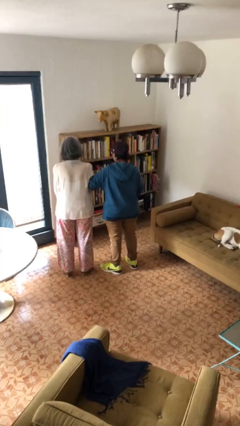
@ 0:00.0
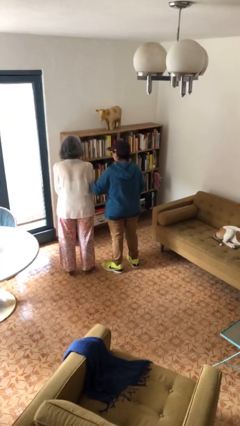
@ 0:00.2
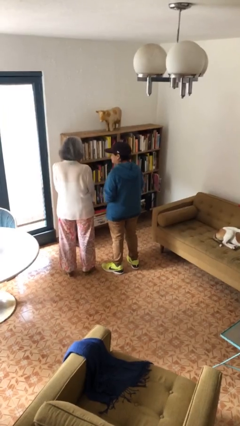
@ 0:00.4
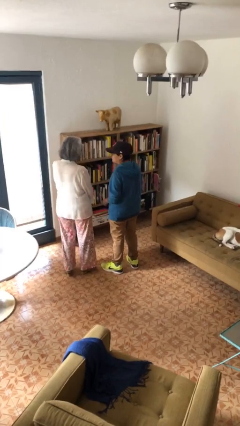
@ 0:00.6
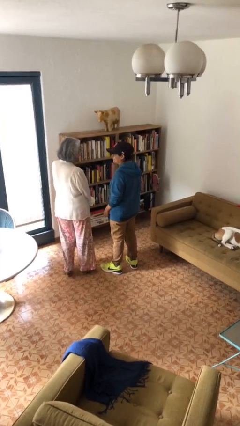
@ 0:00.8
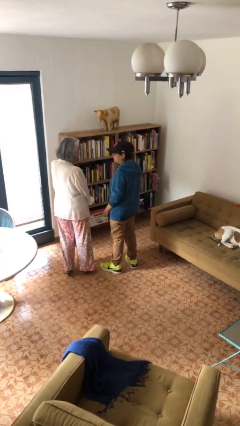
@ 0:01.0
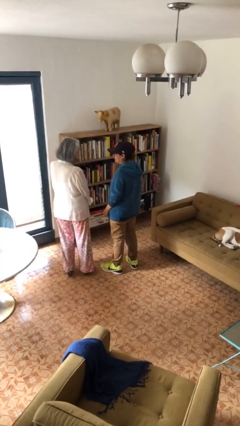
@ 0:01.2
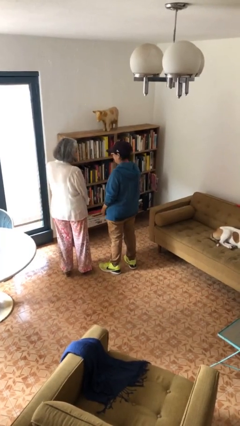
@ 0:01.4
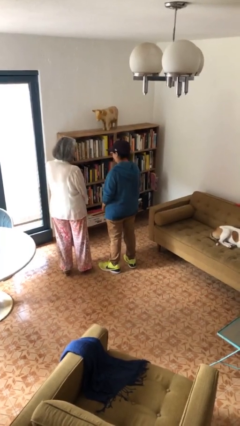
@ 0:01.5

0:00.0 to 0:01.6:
person nudges person with elbow

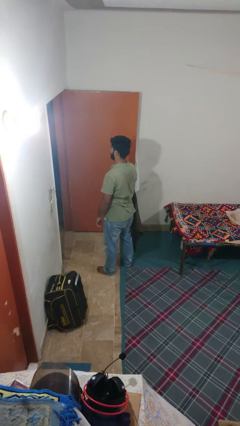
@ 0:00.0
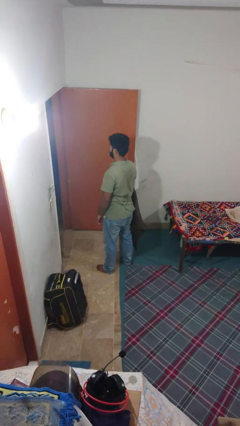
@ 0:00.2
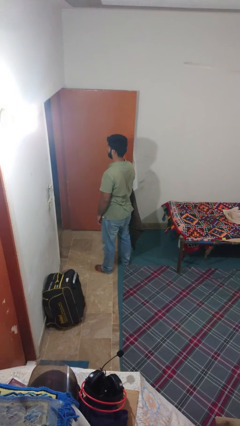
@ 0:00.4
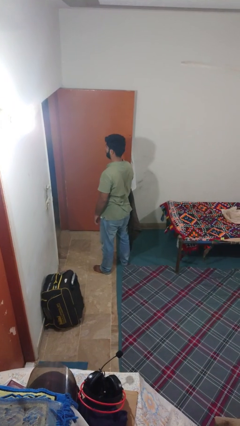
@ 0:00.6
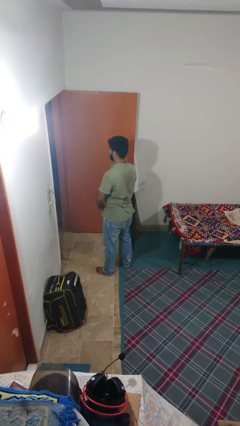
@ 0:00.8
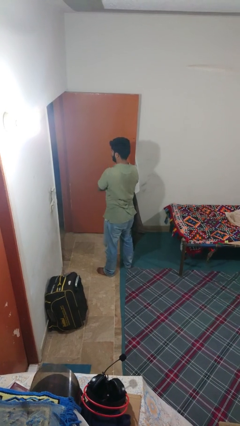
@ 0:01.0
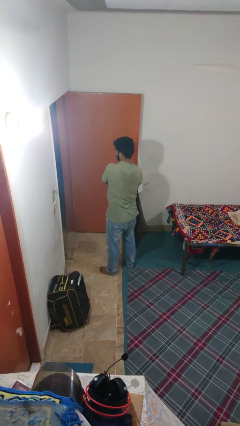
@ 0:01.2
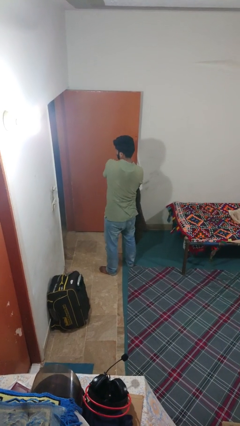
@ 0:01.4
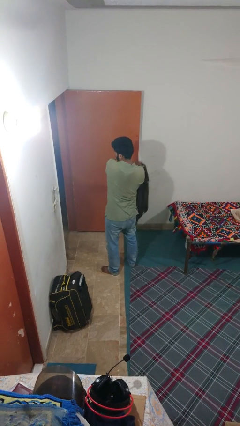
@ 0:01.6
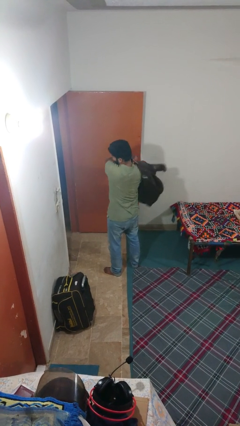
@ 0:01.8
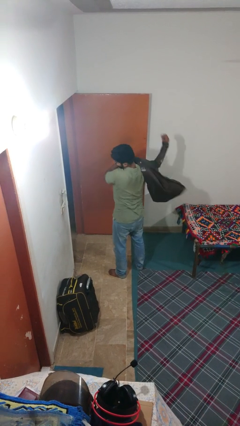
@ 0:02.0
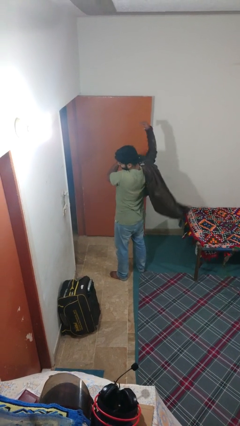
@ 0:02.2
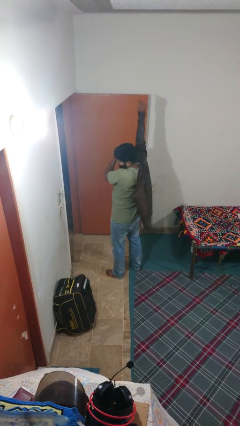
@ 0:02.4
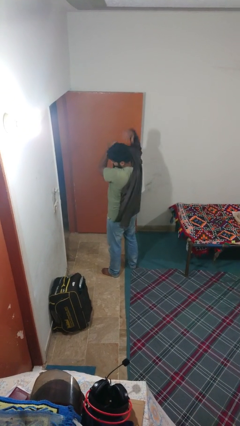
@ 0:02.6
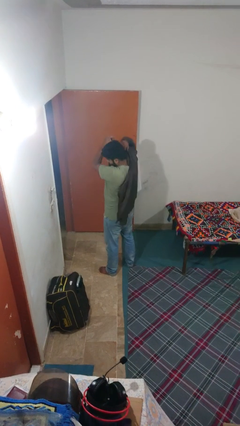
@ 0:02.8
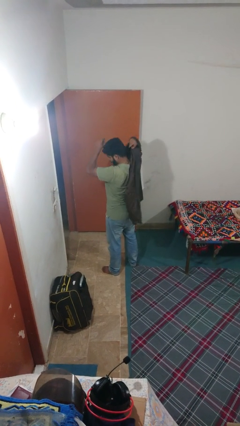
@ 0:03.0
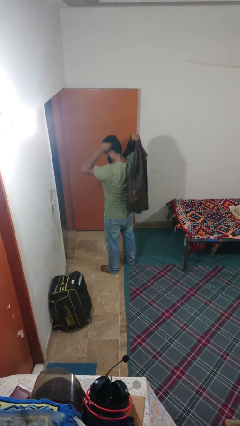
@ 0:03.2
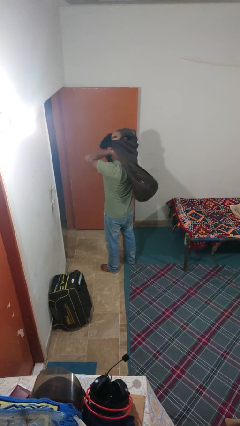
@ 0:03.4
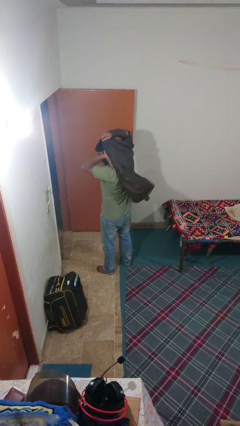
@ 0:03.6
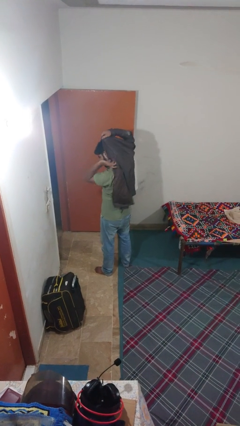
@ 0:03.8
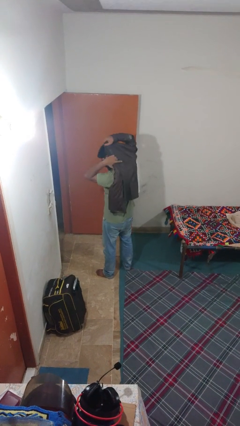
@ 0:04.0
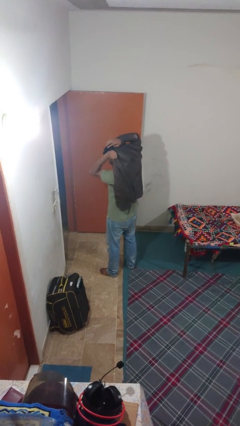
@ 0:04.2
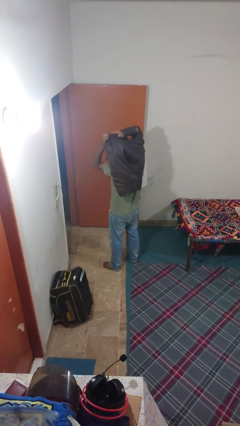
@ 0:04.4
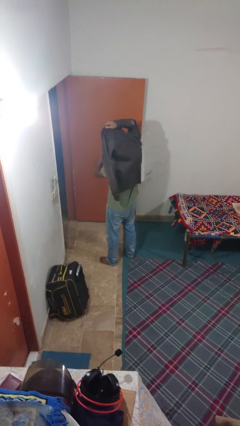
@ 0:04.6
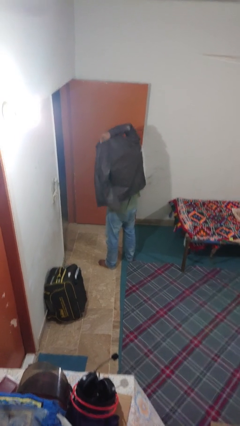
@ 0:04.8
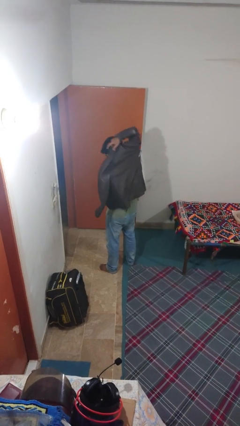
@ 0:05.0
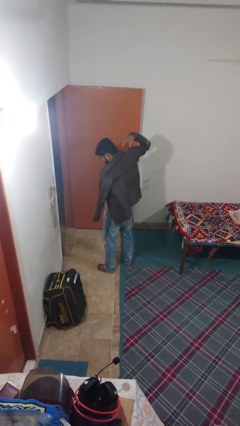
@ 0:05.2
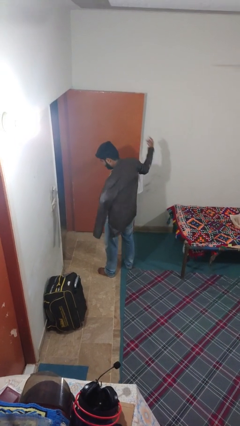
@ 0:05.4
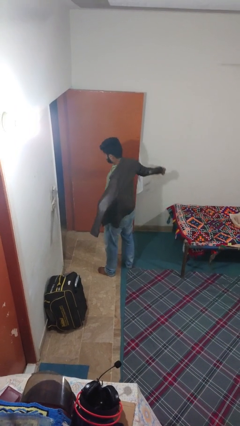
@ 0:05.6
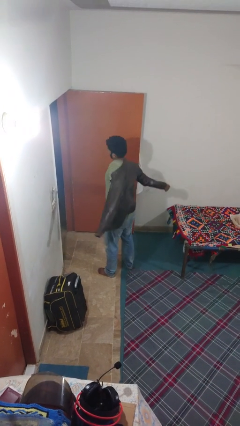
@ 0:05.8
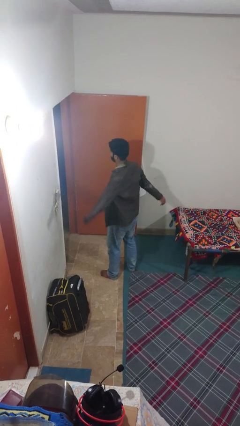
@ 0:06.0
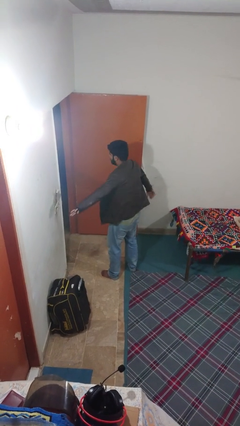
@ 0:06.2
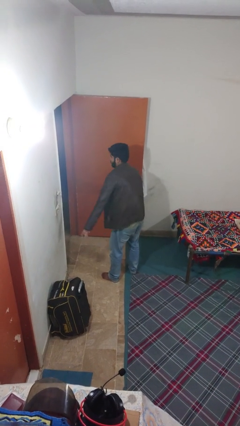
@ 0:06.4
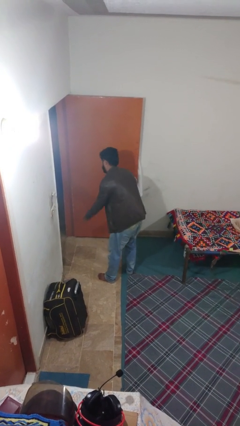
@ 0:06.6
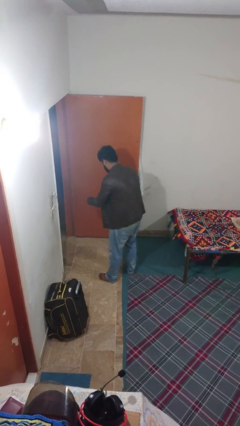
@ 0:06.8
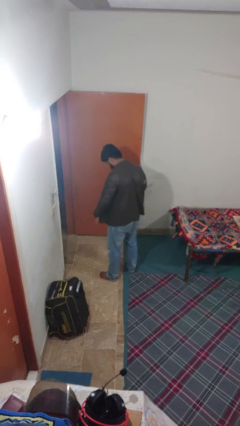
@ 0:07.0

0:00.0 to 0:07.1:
person puts on jacket

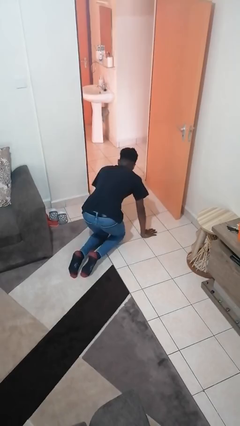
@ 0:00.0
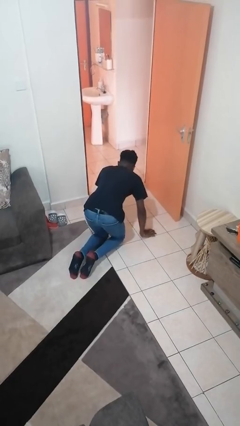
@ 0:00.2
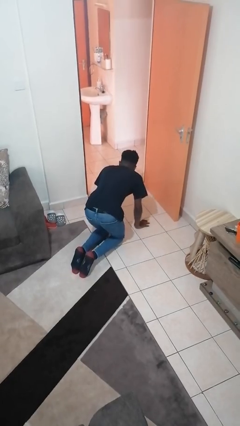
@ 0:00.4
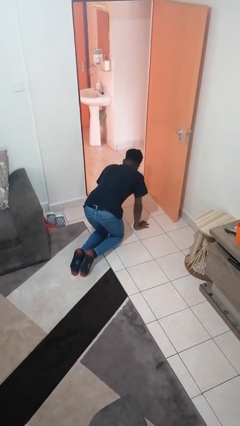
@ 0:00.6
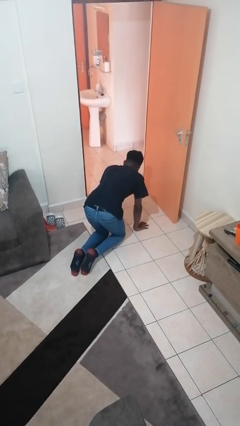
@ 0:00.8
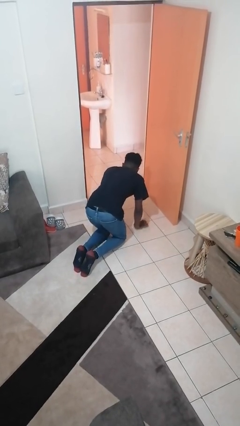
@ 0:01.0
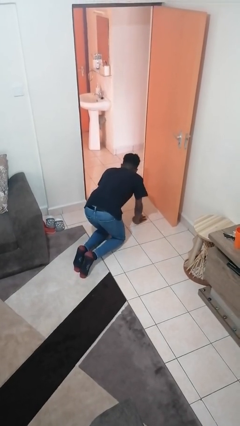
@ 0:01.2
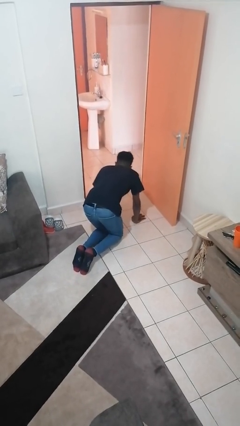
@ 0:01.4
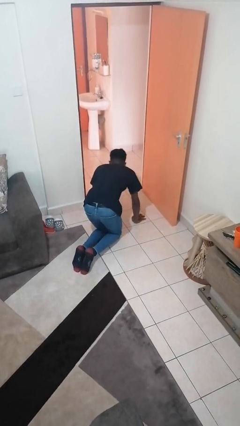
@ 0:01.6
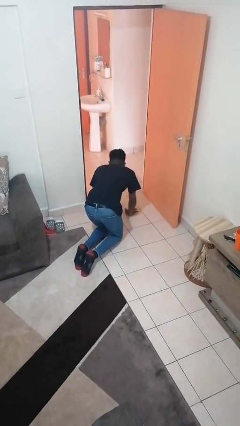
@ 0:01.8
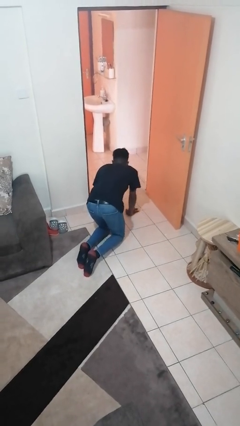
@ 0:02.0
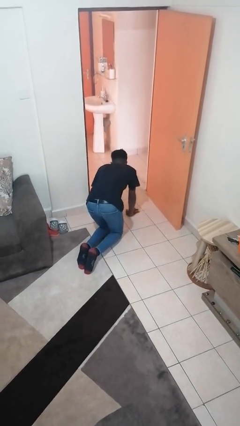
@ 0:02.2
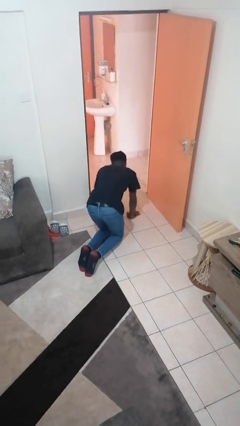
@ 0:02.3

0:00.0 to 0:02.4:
person crawls

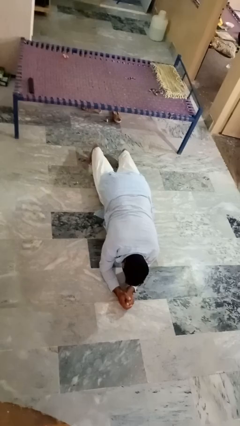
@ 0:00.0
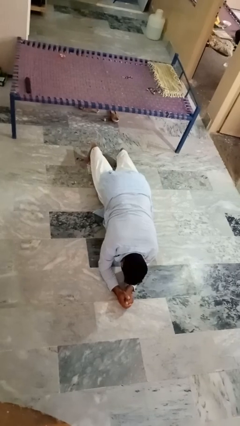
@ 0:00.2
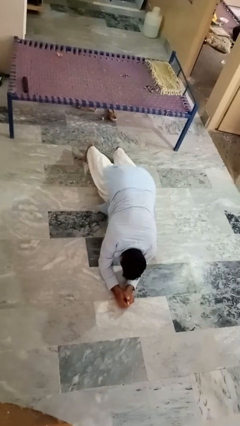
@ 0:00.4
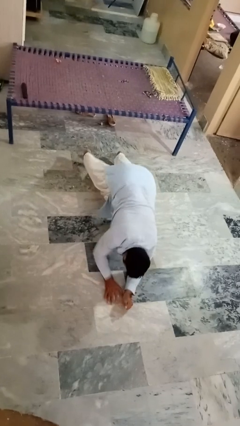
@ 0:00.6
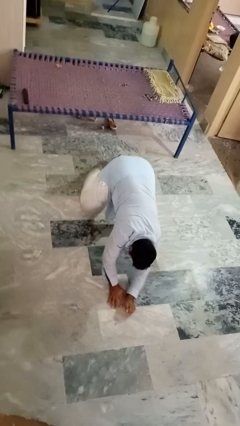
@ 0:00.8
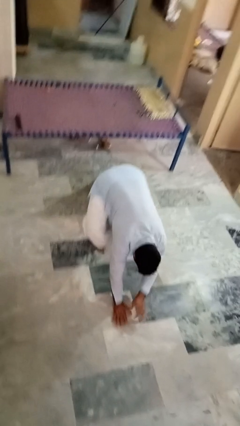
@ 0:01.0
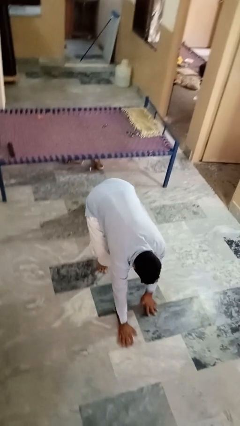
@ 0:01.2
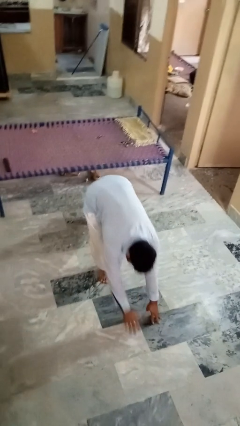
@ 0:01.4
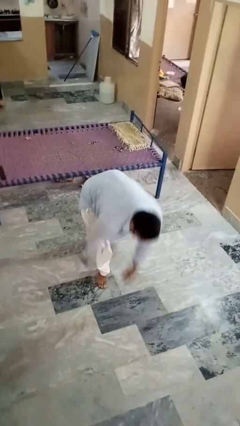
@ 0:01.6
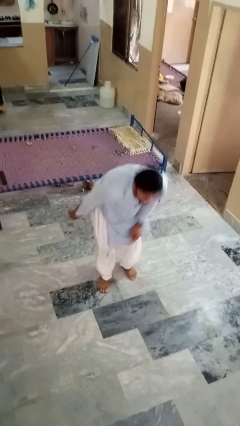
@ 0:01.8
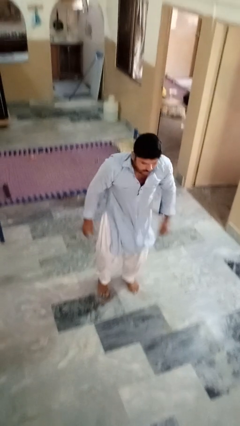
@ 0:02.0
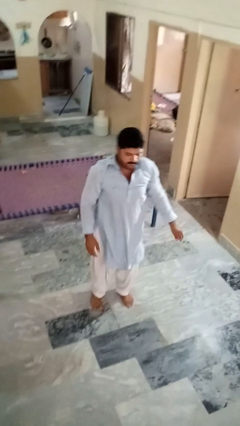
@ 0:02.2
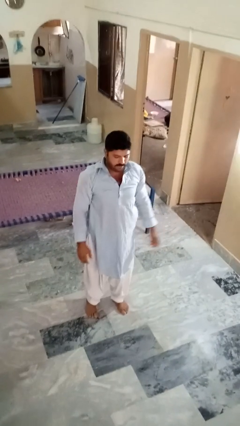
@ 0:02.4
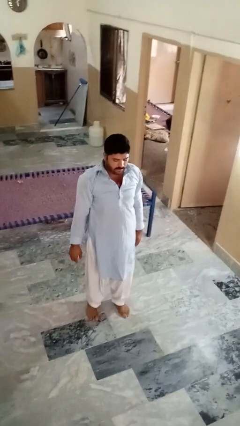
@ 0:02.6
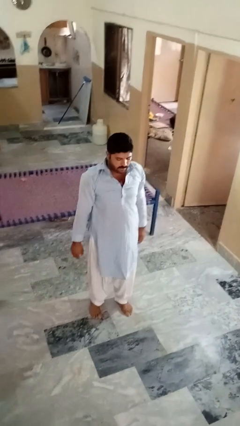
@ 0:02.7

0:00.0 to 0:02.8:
person stands up from floor

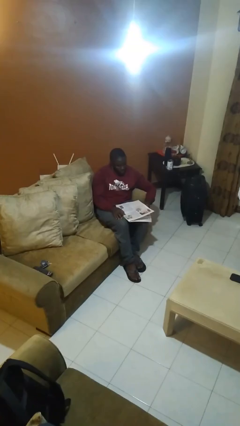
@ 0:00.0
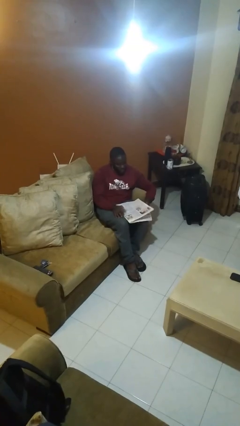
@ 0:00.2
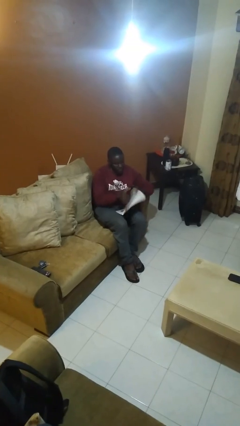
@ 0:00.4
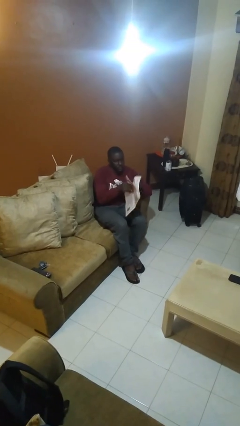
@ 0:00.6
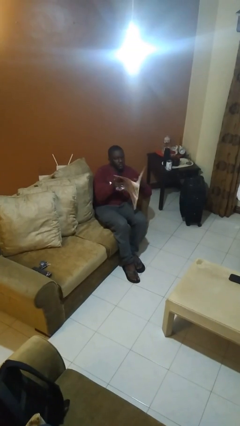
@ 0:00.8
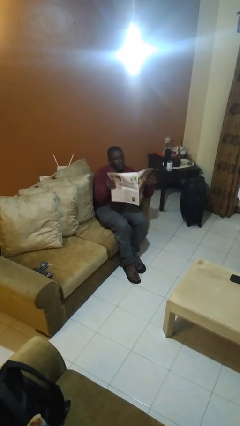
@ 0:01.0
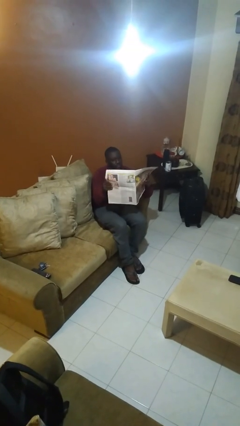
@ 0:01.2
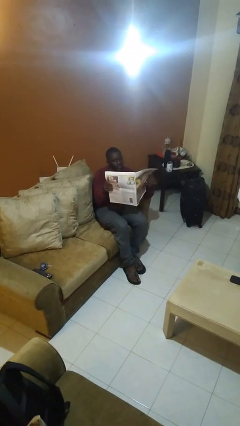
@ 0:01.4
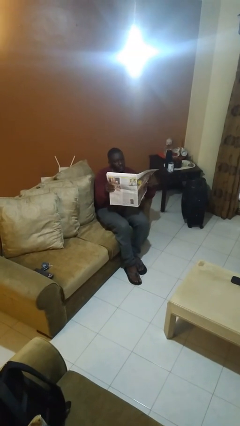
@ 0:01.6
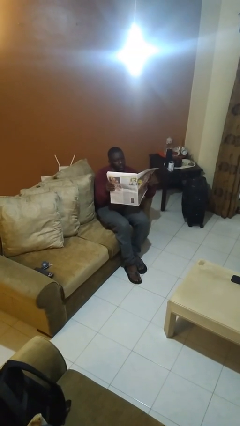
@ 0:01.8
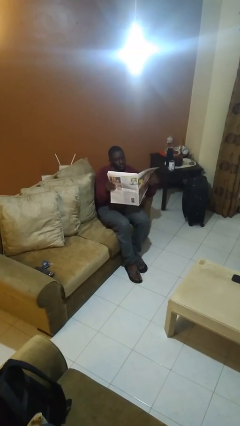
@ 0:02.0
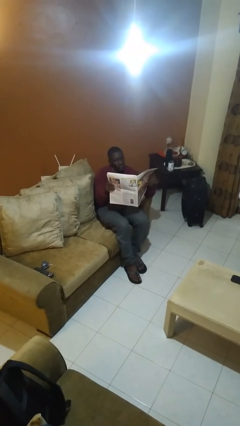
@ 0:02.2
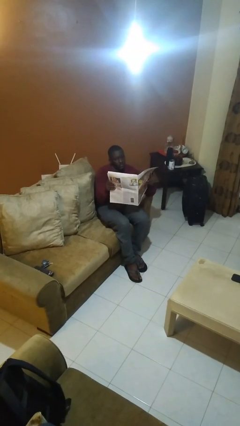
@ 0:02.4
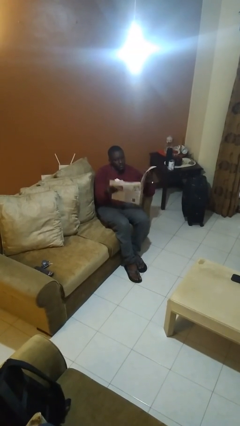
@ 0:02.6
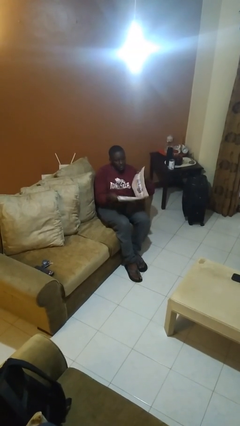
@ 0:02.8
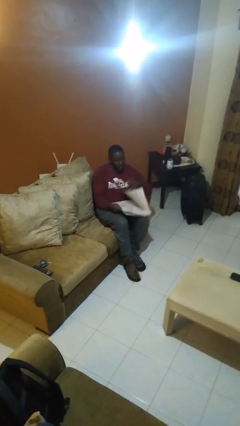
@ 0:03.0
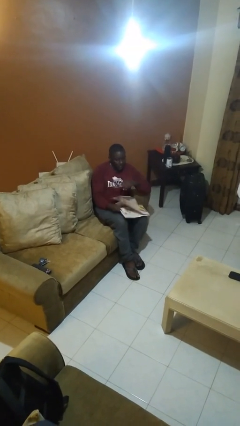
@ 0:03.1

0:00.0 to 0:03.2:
person reads newspaper

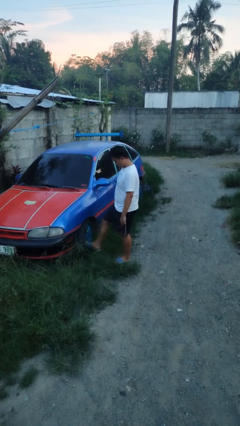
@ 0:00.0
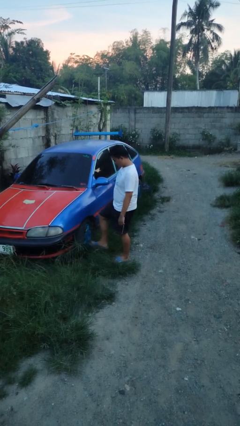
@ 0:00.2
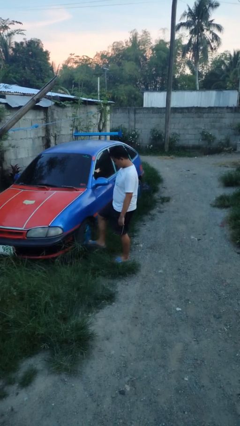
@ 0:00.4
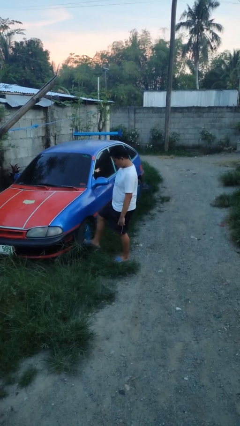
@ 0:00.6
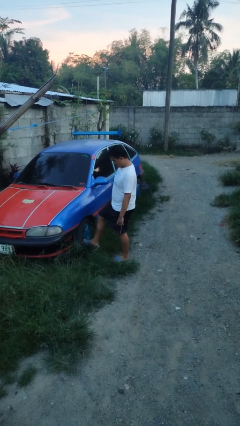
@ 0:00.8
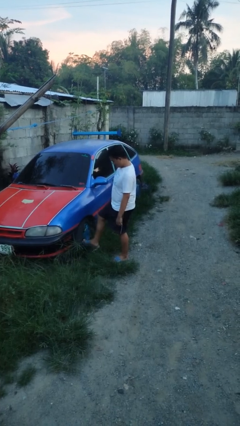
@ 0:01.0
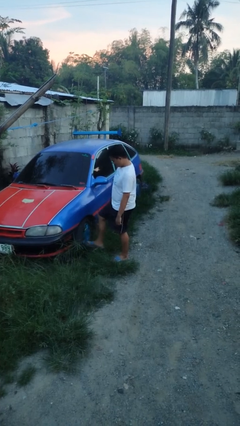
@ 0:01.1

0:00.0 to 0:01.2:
person kicks car tires
